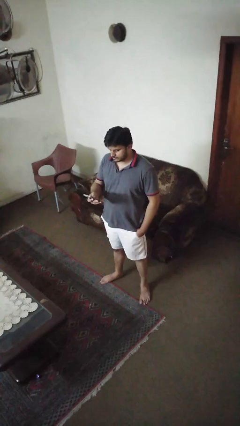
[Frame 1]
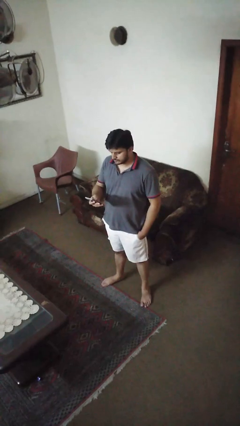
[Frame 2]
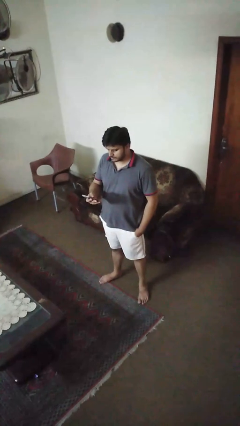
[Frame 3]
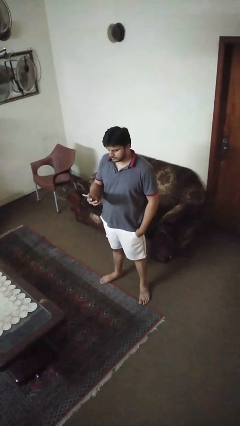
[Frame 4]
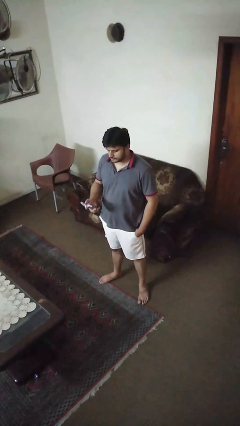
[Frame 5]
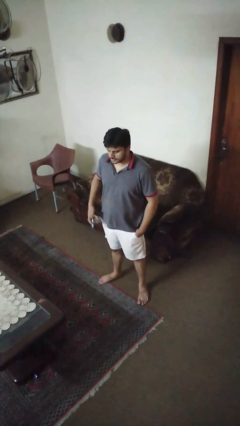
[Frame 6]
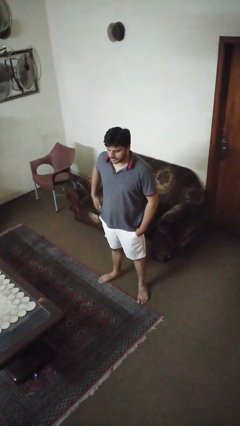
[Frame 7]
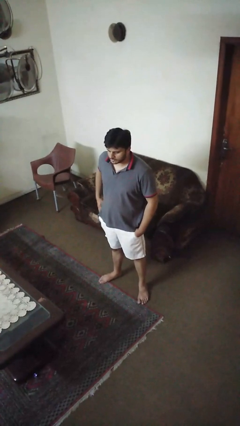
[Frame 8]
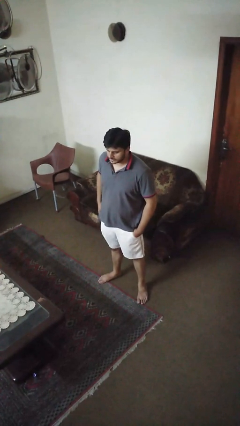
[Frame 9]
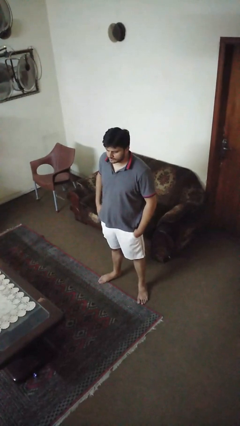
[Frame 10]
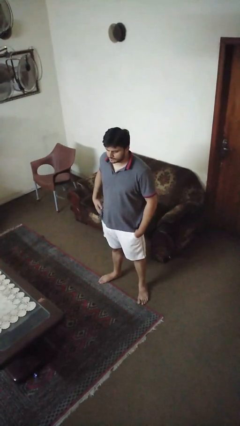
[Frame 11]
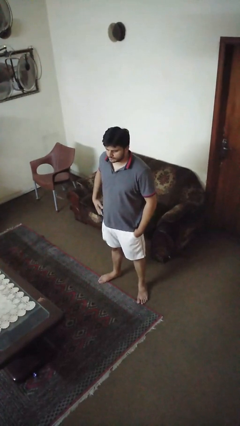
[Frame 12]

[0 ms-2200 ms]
person puts phone into pocket

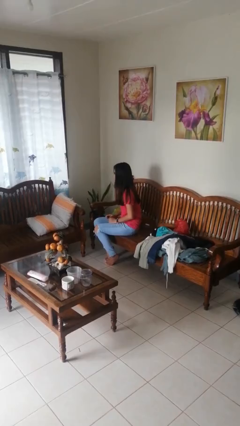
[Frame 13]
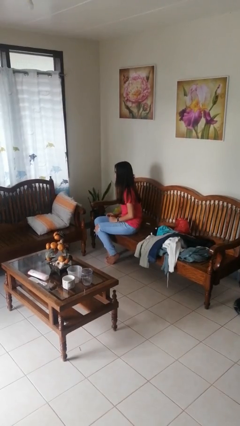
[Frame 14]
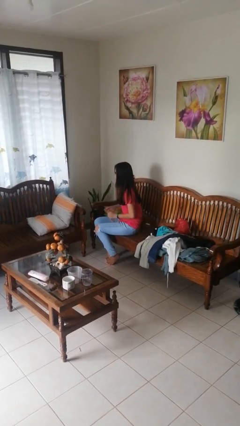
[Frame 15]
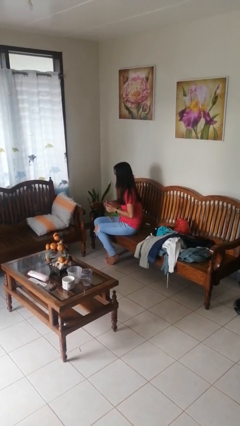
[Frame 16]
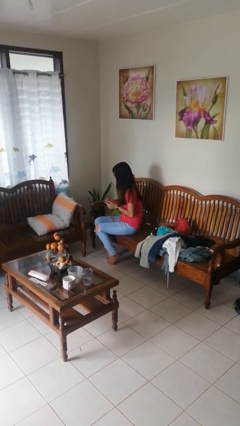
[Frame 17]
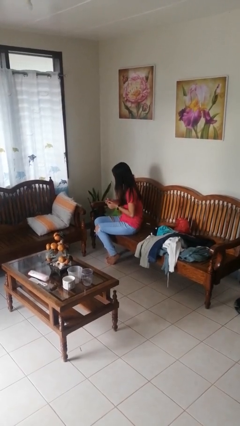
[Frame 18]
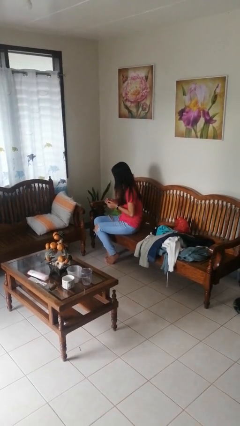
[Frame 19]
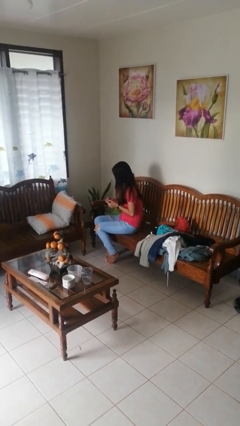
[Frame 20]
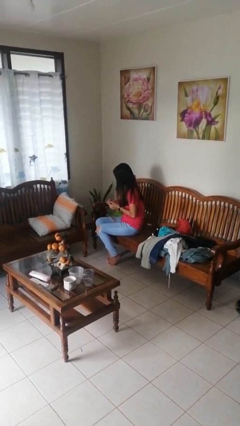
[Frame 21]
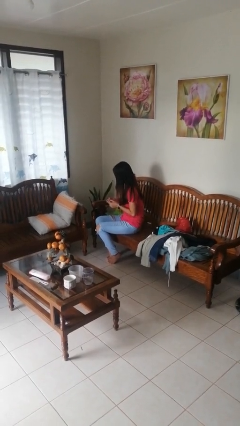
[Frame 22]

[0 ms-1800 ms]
person clips fingernails

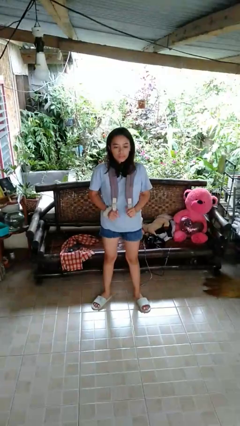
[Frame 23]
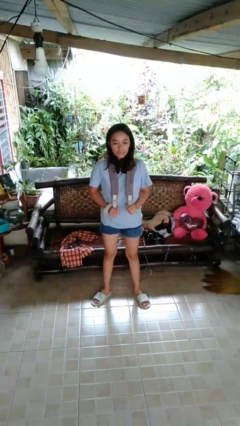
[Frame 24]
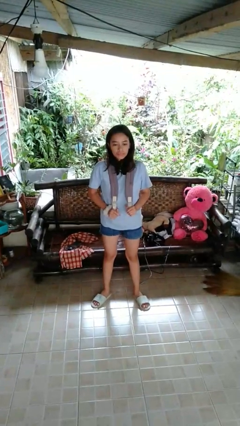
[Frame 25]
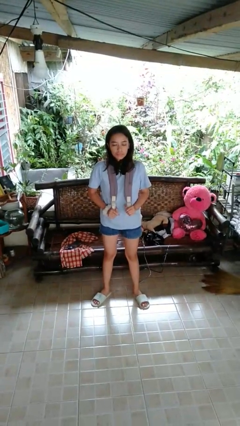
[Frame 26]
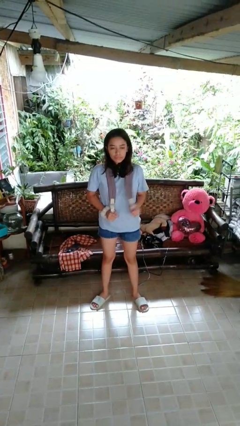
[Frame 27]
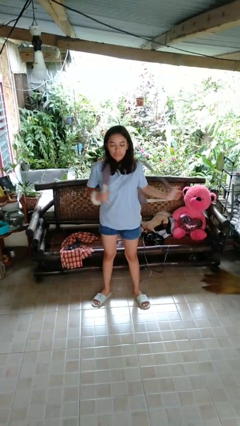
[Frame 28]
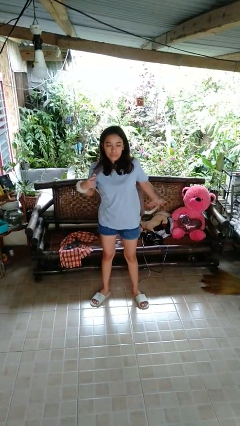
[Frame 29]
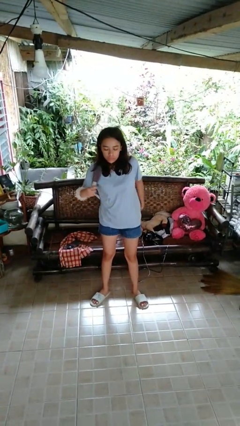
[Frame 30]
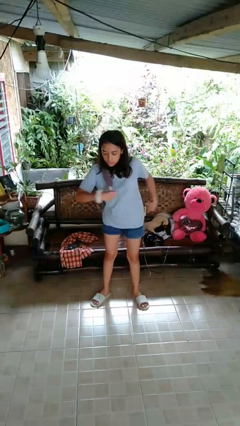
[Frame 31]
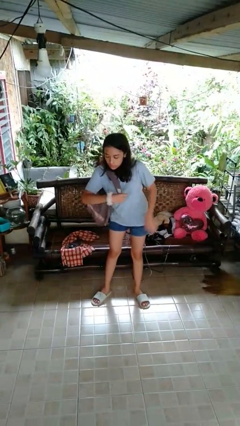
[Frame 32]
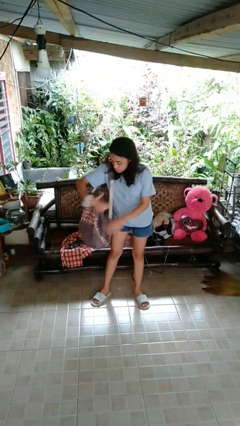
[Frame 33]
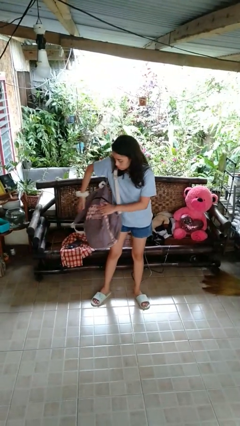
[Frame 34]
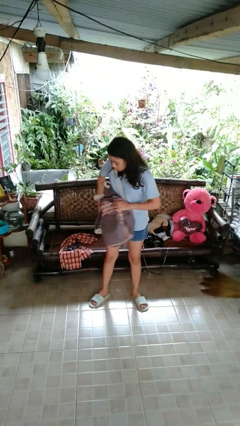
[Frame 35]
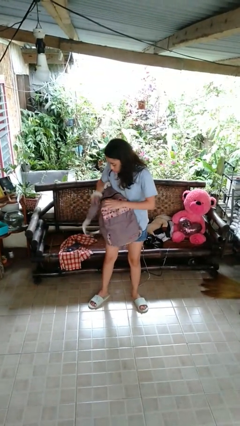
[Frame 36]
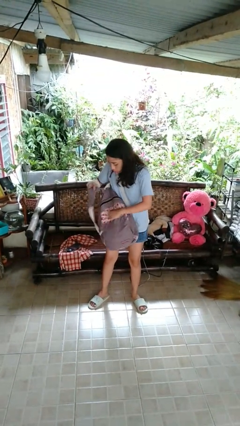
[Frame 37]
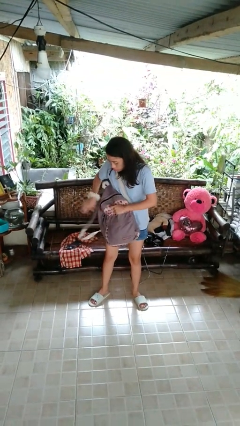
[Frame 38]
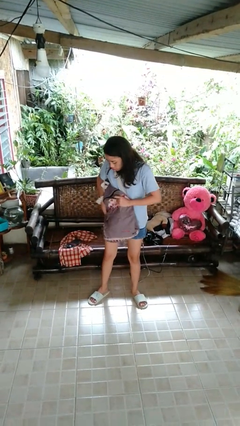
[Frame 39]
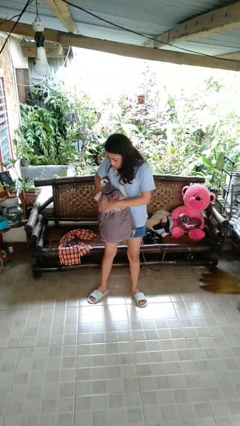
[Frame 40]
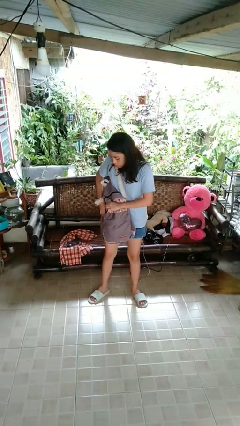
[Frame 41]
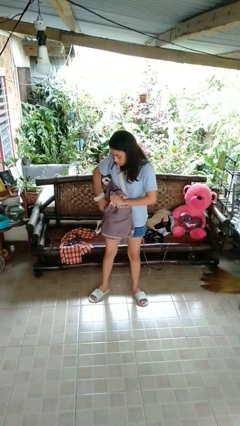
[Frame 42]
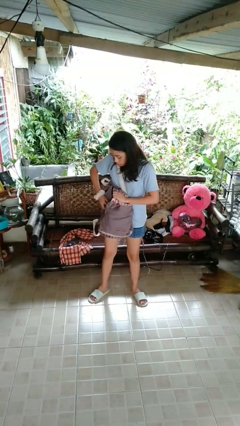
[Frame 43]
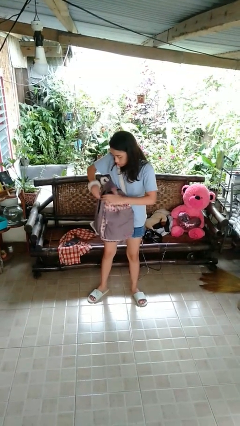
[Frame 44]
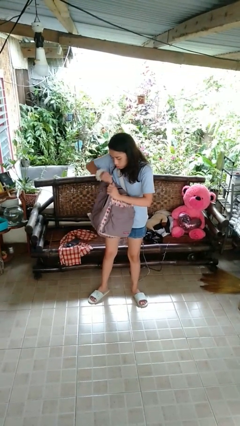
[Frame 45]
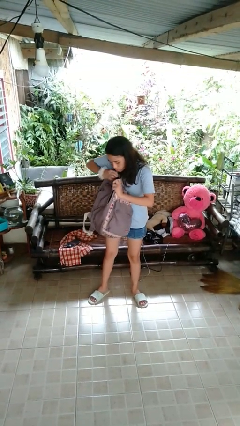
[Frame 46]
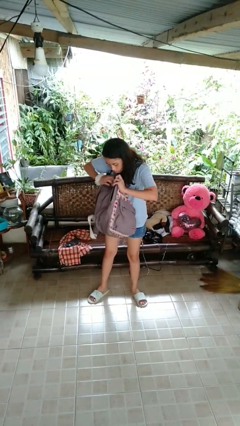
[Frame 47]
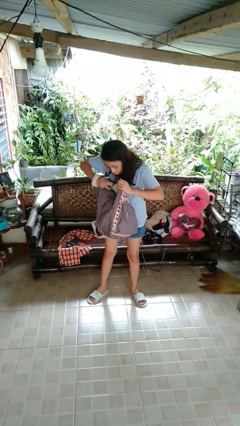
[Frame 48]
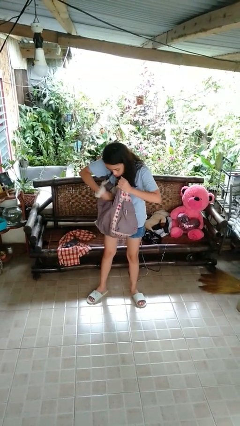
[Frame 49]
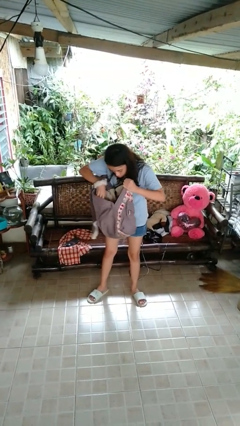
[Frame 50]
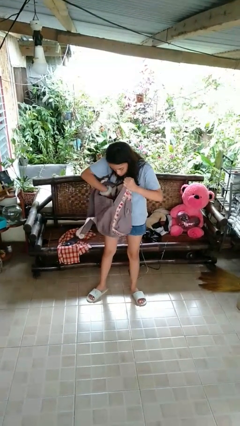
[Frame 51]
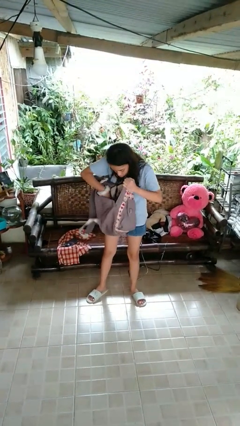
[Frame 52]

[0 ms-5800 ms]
person searches in backpack

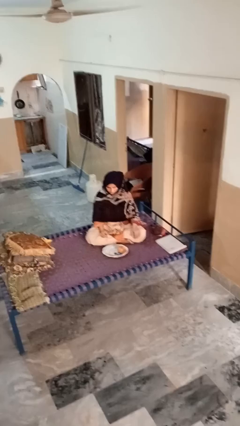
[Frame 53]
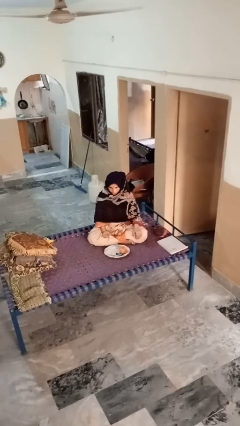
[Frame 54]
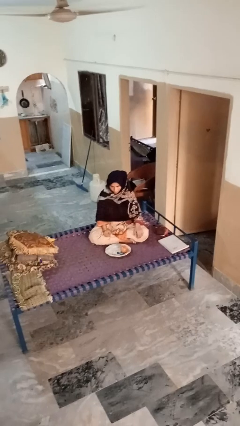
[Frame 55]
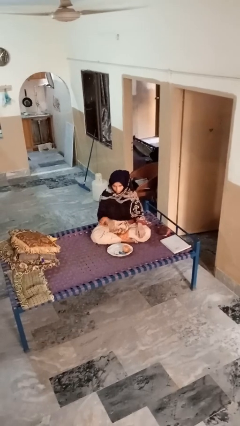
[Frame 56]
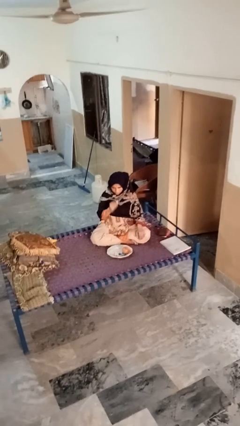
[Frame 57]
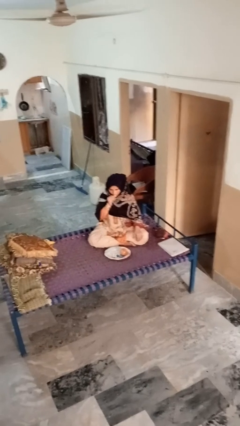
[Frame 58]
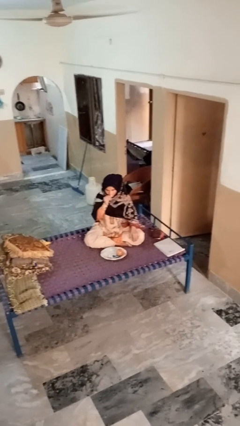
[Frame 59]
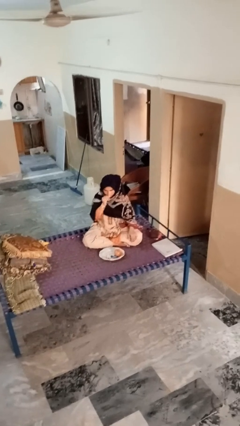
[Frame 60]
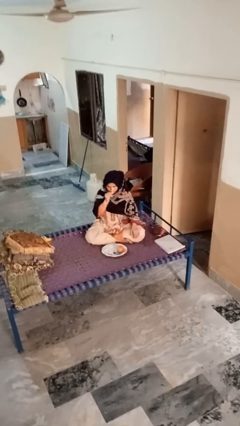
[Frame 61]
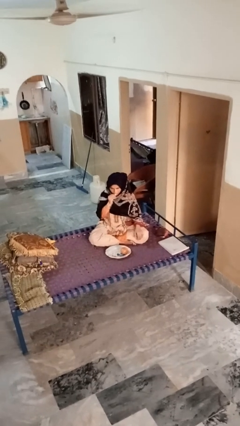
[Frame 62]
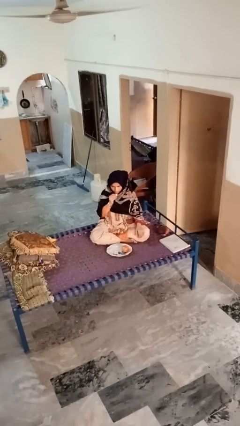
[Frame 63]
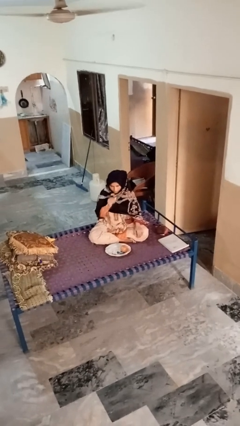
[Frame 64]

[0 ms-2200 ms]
person eats apple

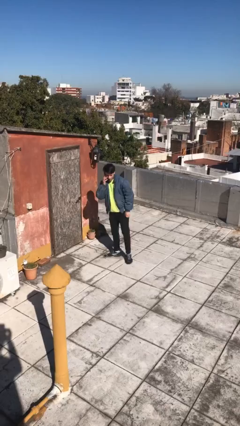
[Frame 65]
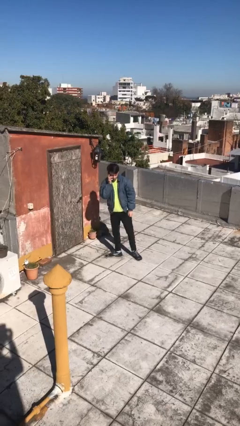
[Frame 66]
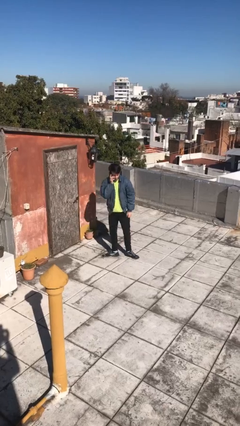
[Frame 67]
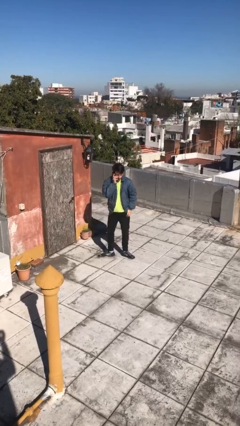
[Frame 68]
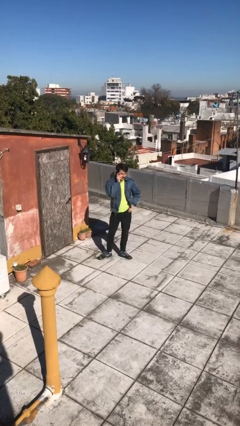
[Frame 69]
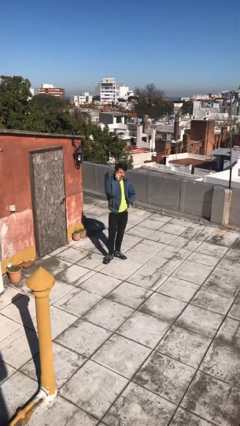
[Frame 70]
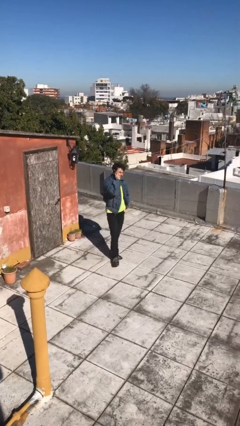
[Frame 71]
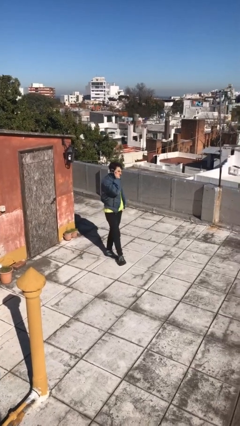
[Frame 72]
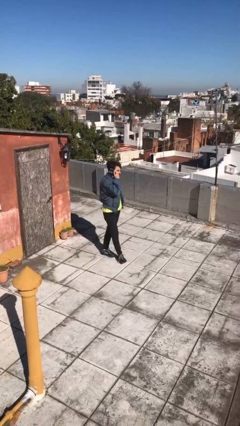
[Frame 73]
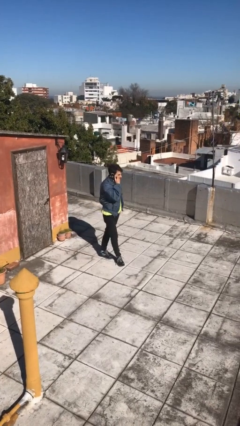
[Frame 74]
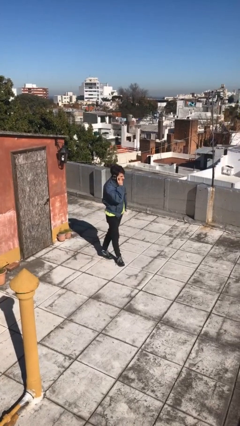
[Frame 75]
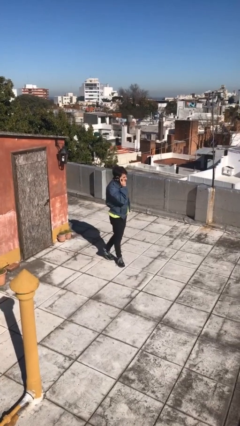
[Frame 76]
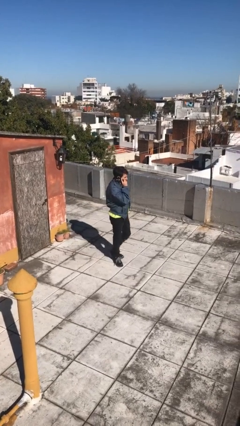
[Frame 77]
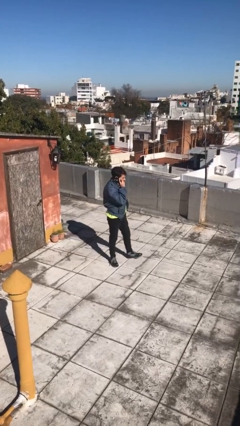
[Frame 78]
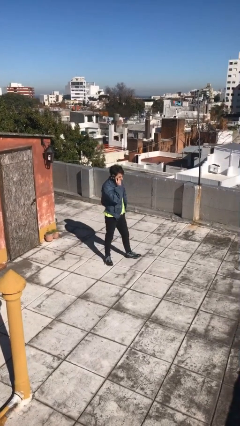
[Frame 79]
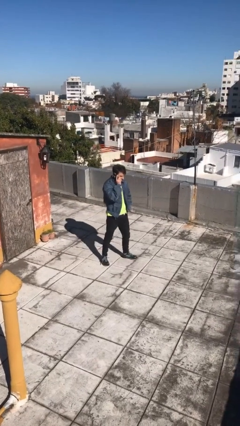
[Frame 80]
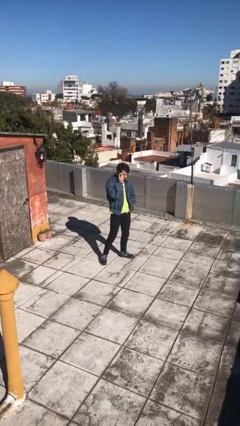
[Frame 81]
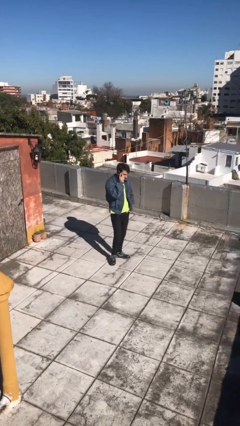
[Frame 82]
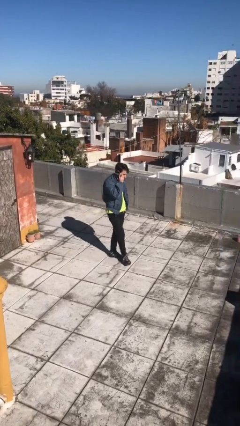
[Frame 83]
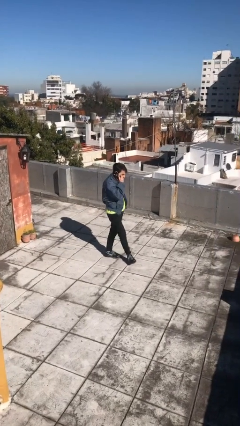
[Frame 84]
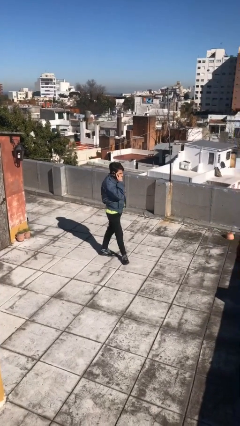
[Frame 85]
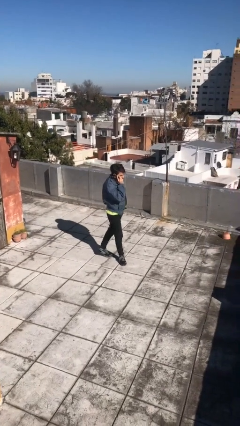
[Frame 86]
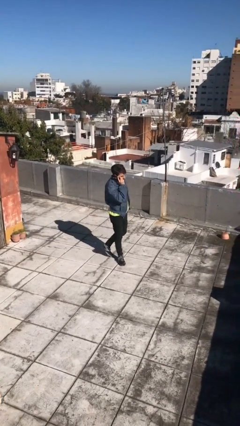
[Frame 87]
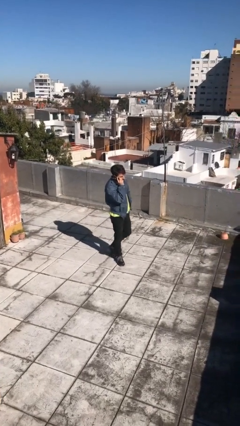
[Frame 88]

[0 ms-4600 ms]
person talks on phone

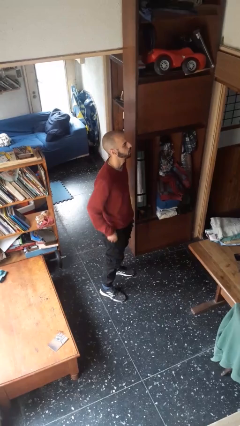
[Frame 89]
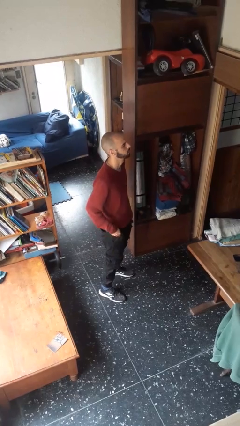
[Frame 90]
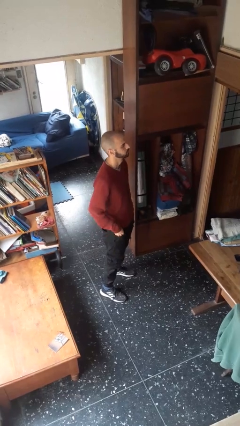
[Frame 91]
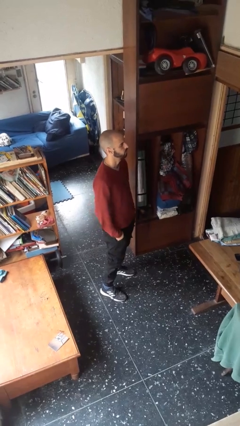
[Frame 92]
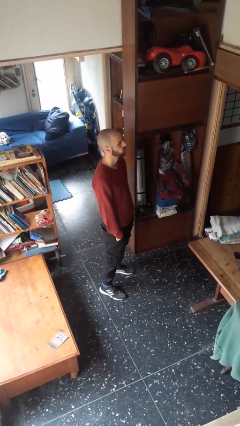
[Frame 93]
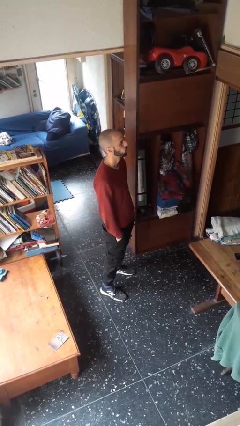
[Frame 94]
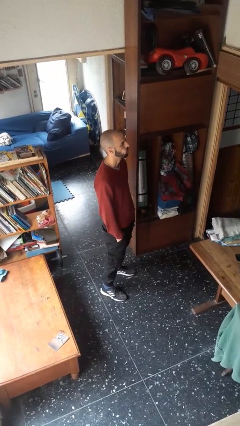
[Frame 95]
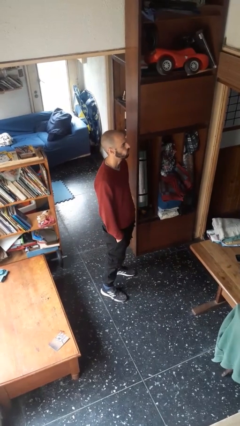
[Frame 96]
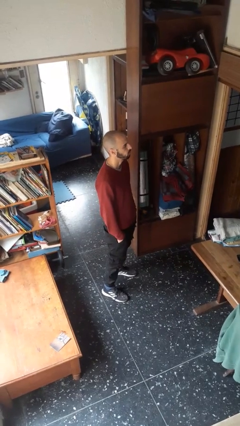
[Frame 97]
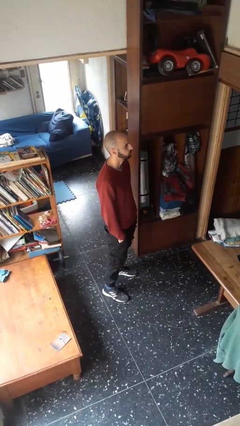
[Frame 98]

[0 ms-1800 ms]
person puts hands in back pockets
